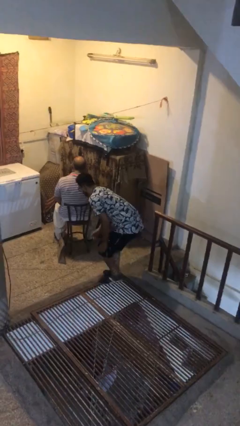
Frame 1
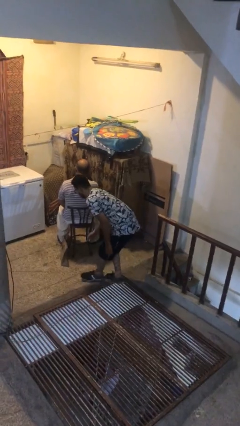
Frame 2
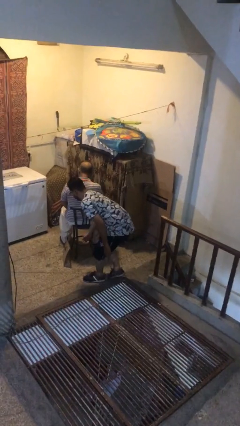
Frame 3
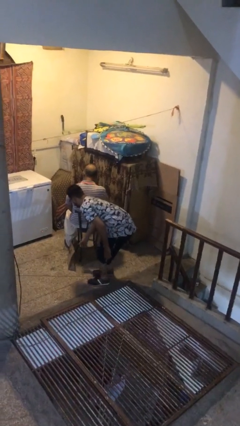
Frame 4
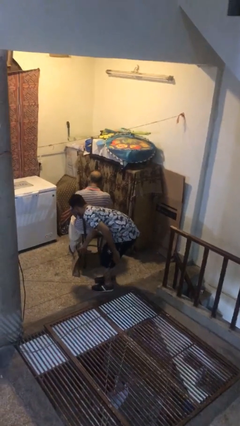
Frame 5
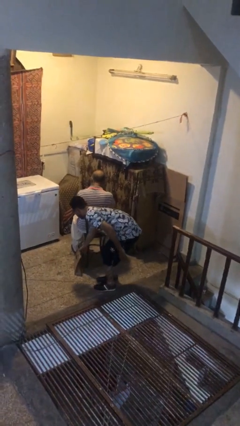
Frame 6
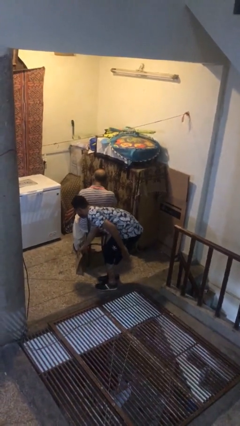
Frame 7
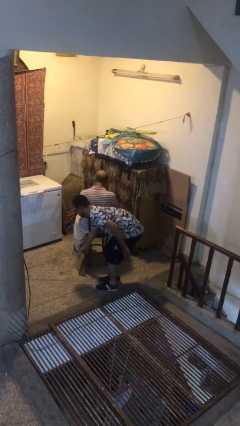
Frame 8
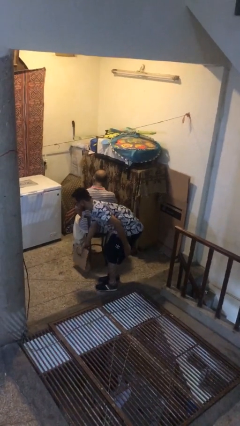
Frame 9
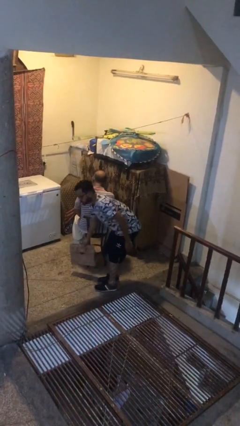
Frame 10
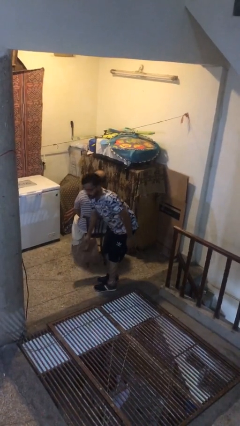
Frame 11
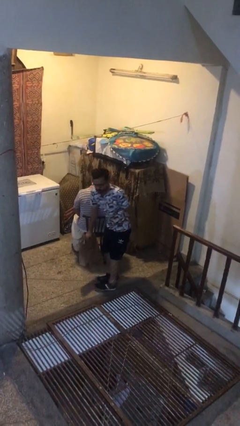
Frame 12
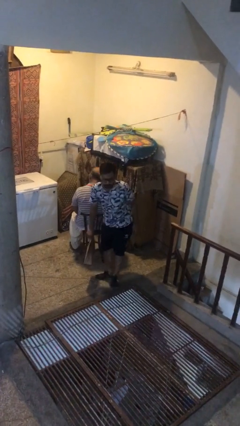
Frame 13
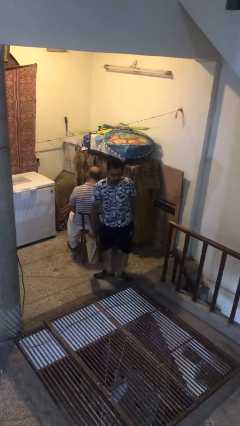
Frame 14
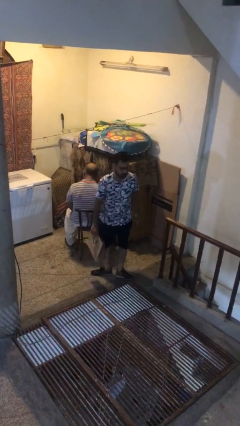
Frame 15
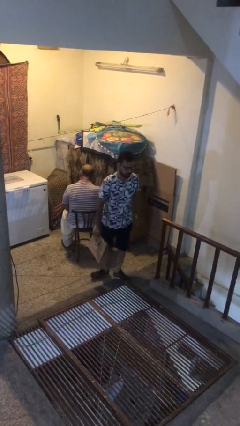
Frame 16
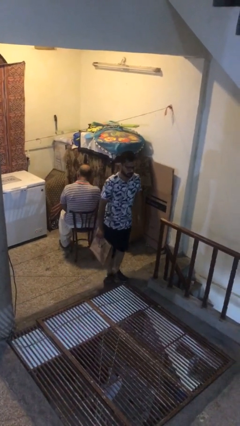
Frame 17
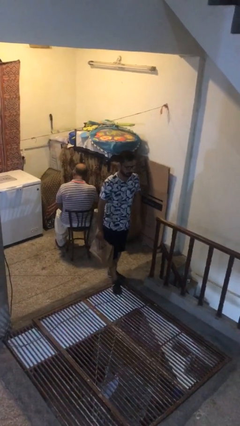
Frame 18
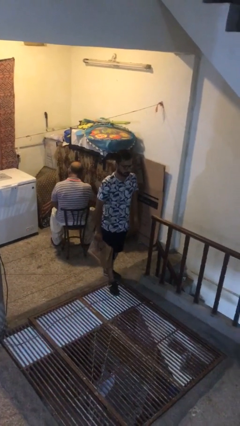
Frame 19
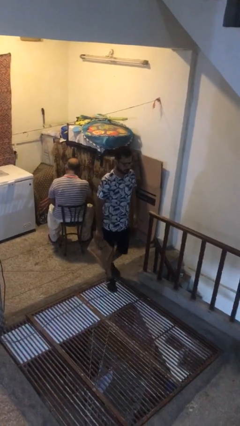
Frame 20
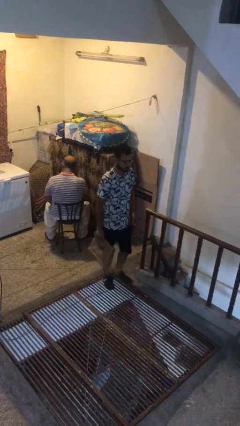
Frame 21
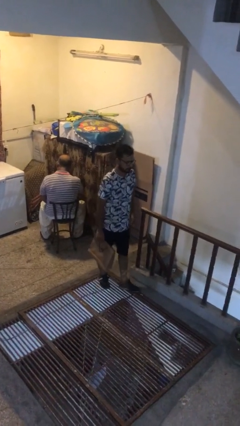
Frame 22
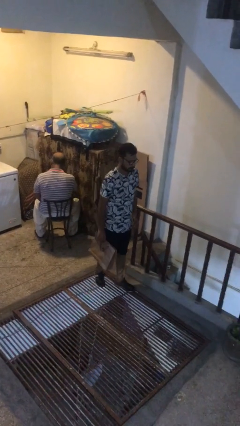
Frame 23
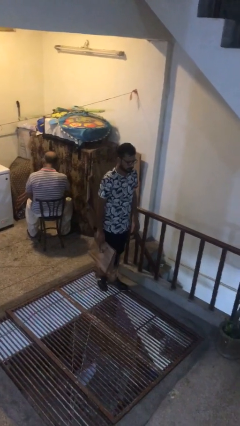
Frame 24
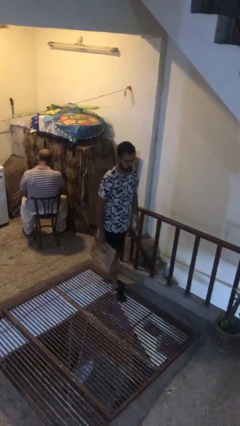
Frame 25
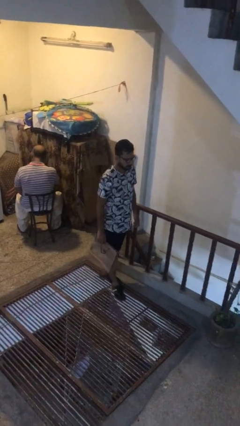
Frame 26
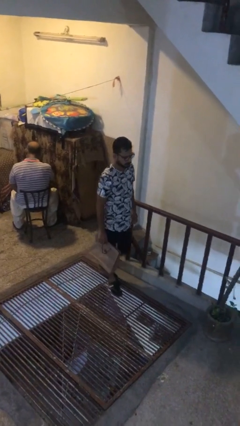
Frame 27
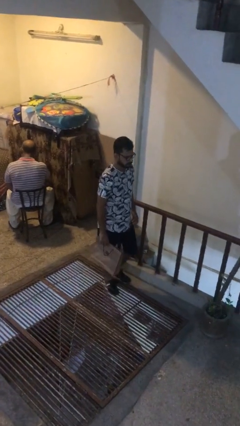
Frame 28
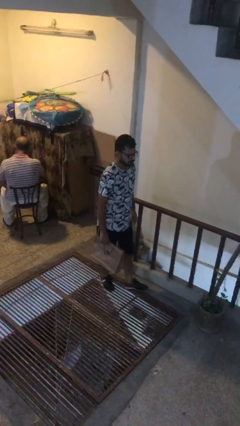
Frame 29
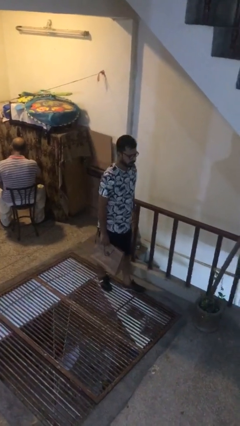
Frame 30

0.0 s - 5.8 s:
person steals object from person

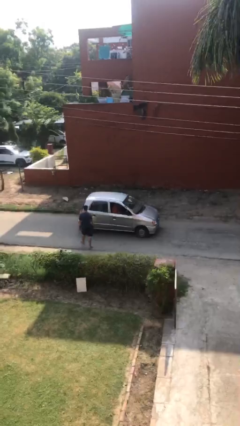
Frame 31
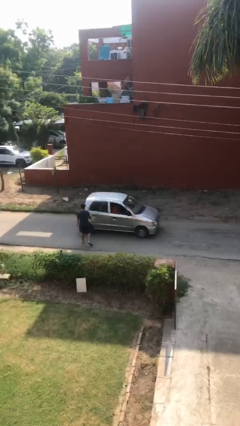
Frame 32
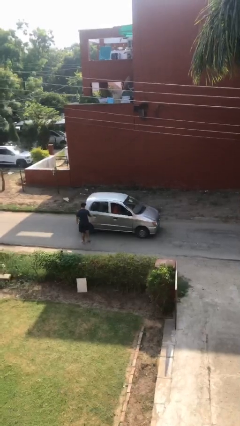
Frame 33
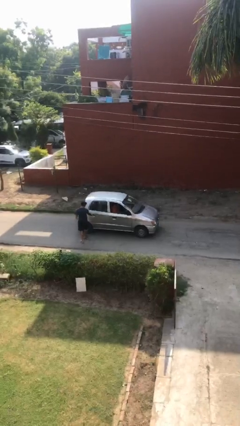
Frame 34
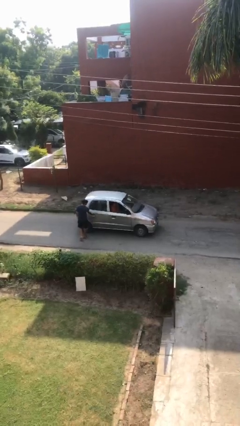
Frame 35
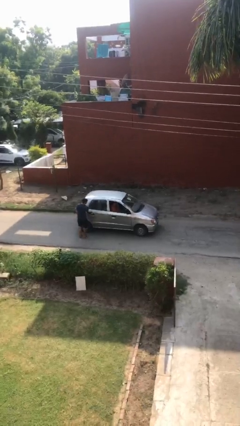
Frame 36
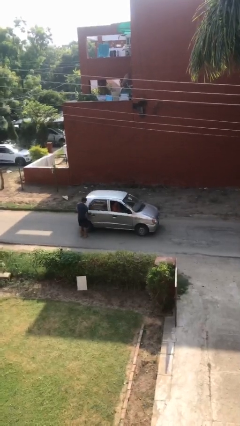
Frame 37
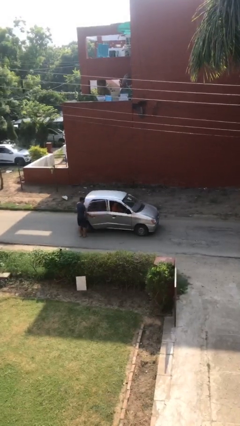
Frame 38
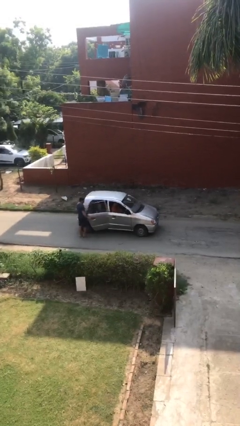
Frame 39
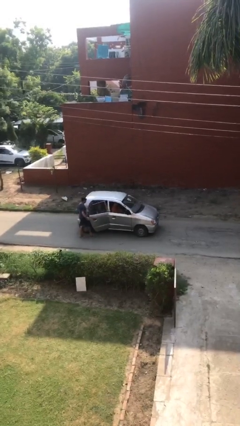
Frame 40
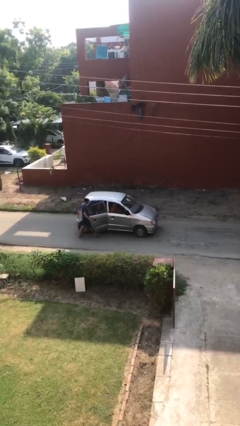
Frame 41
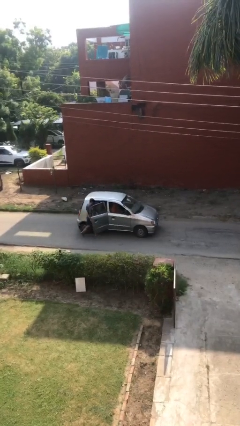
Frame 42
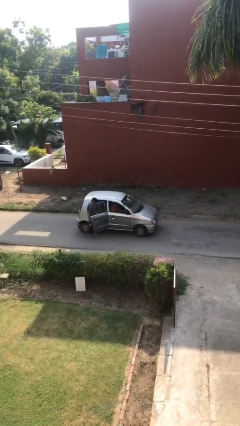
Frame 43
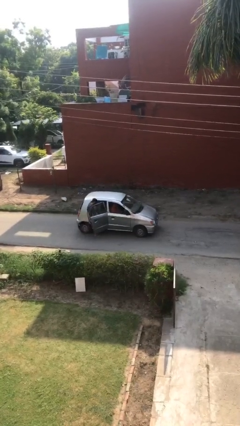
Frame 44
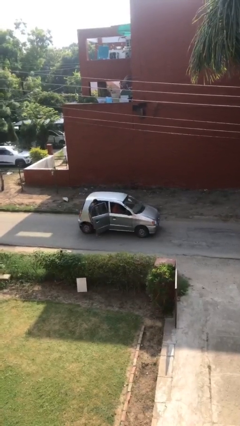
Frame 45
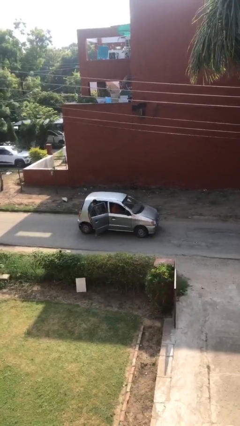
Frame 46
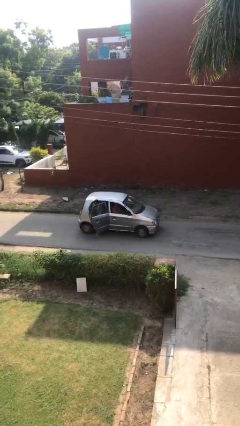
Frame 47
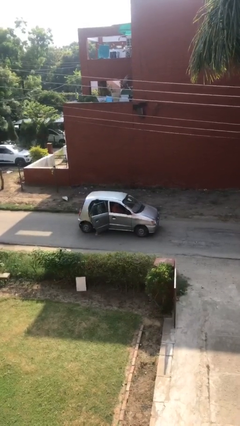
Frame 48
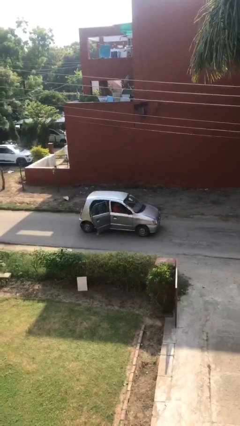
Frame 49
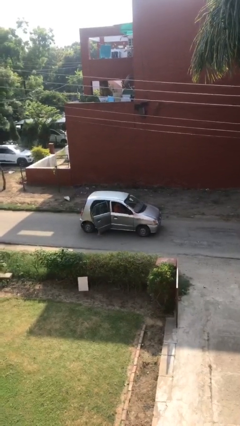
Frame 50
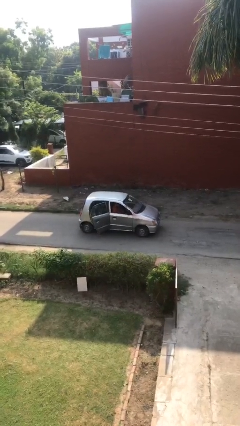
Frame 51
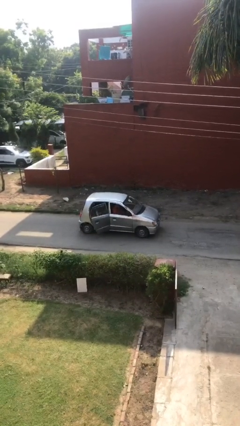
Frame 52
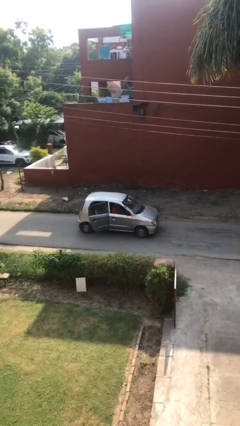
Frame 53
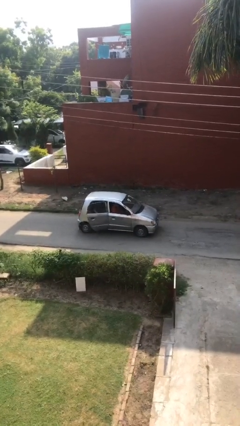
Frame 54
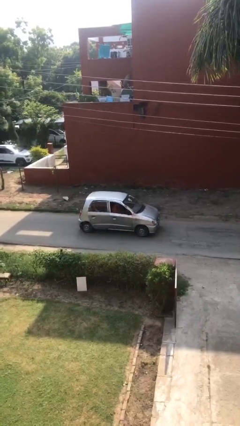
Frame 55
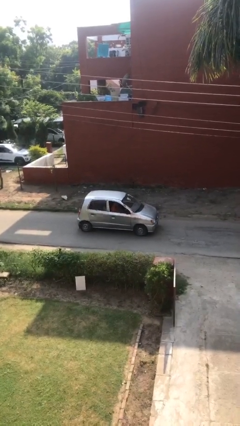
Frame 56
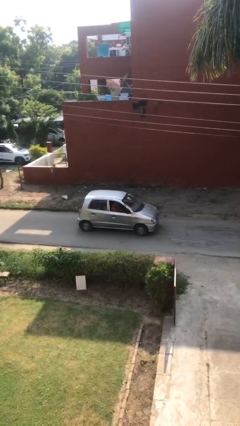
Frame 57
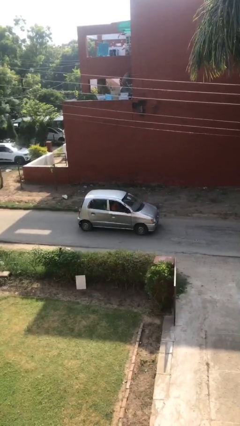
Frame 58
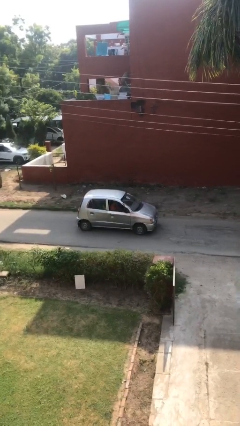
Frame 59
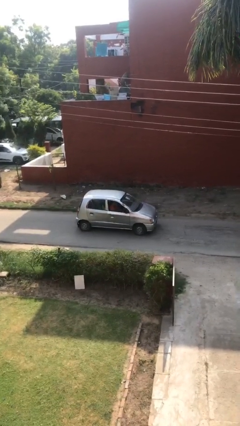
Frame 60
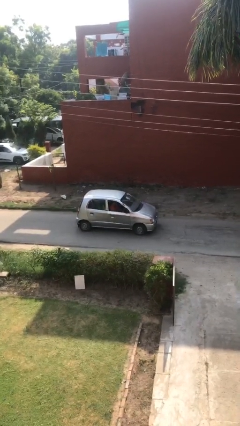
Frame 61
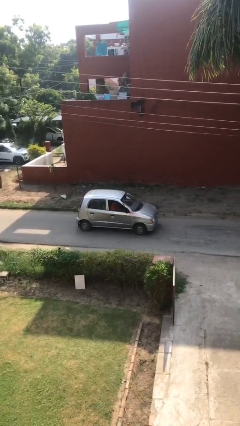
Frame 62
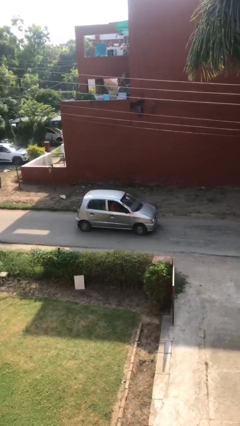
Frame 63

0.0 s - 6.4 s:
car picks up person

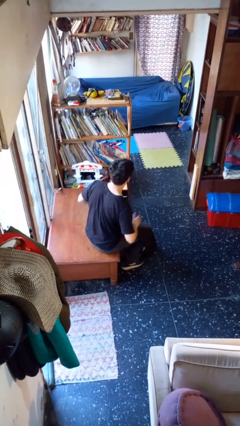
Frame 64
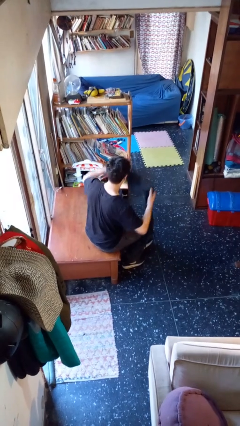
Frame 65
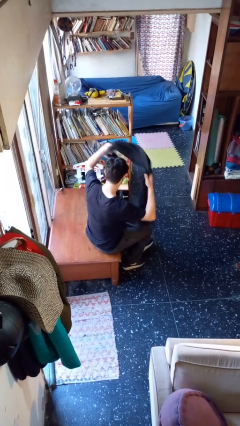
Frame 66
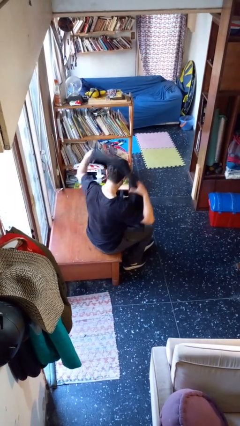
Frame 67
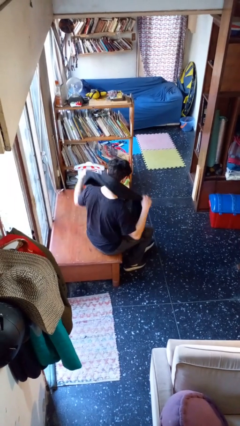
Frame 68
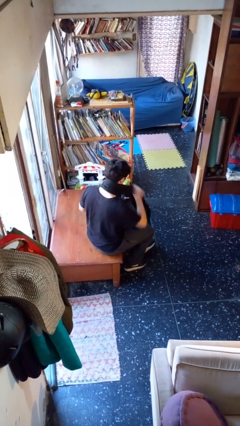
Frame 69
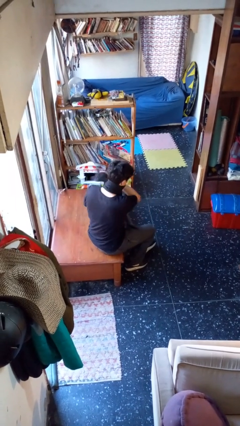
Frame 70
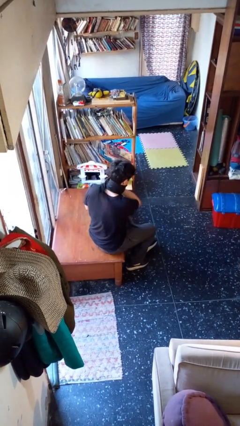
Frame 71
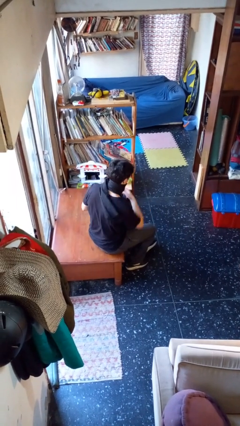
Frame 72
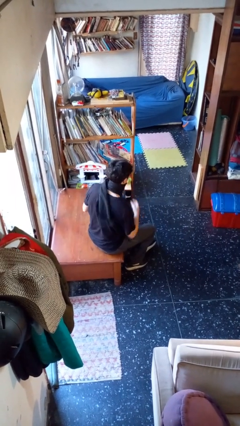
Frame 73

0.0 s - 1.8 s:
person puts on scarf

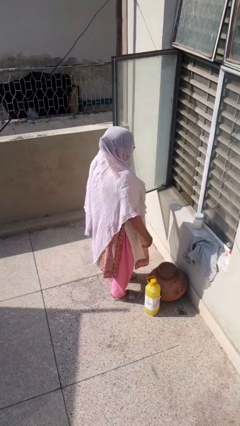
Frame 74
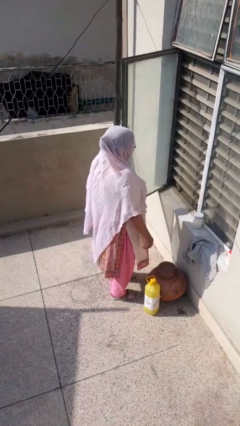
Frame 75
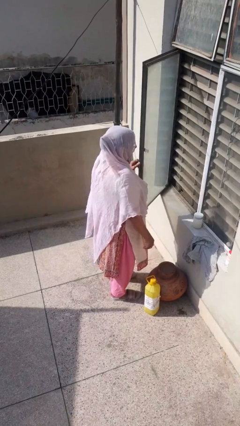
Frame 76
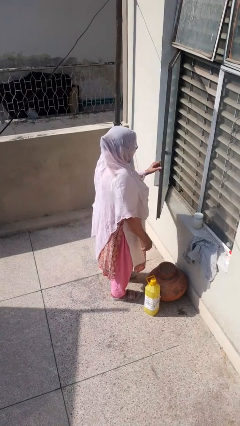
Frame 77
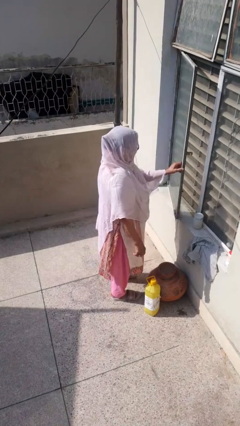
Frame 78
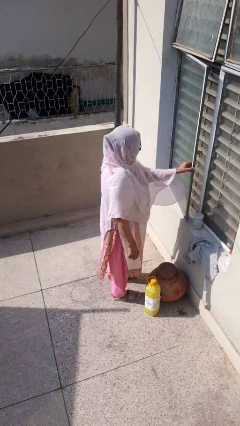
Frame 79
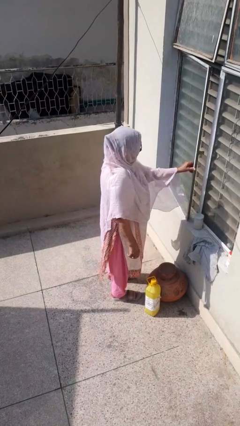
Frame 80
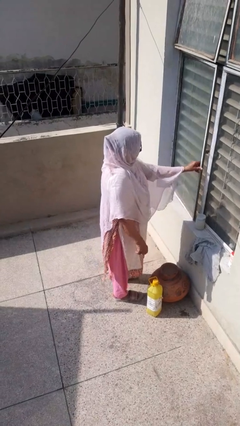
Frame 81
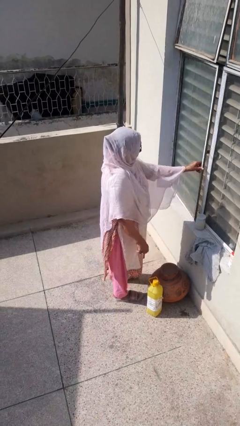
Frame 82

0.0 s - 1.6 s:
person closes home window

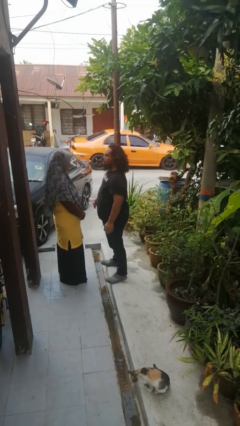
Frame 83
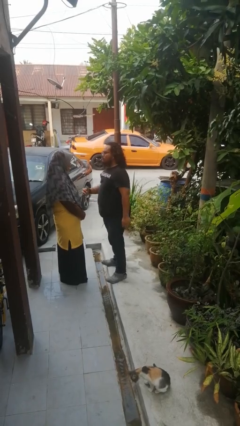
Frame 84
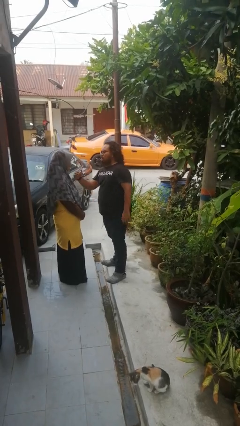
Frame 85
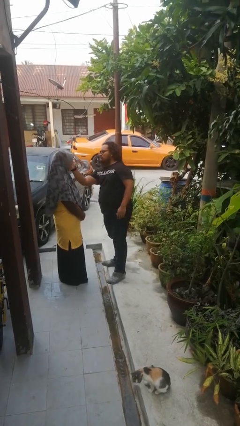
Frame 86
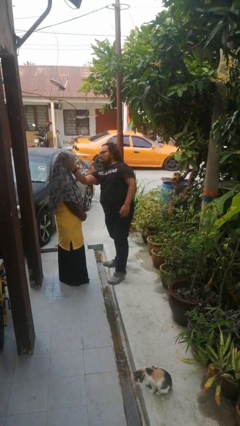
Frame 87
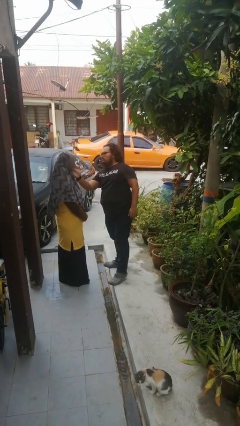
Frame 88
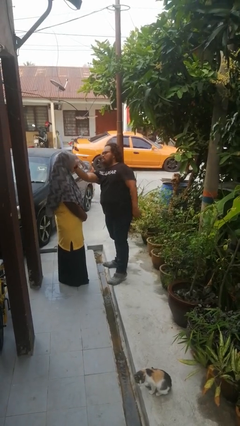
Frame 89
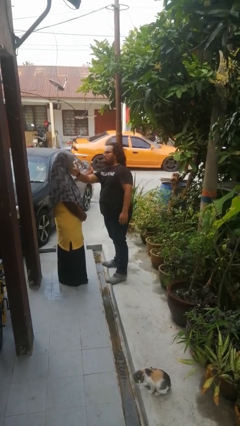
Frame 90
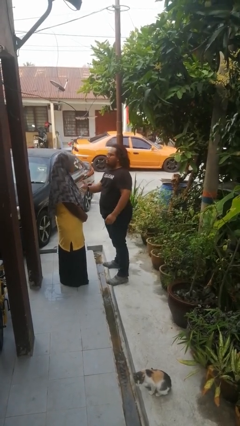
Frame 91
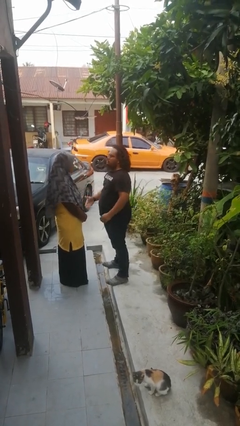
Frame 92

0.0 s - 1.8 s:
person touches face of person

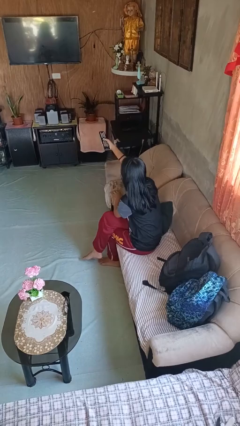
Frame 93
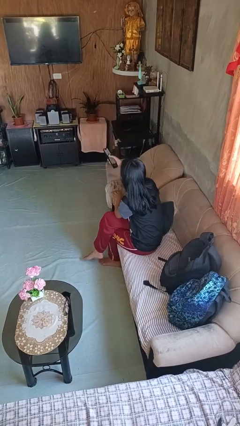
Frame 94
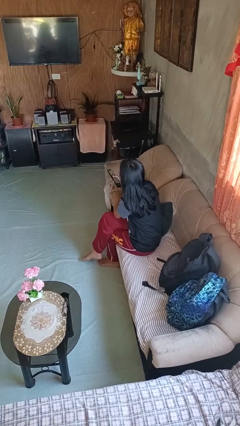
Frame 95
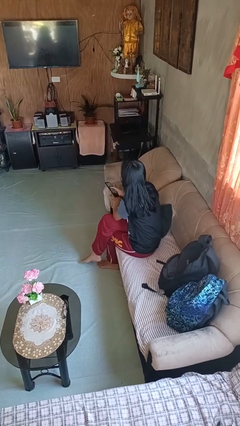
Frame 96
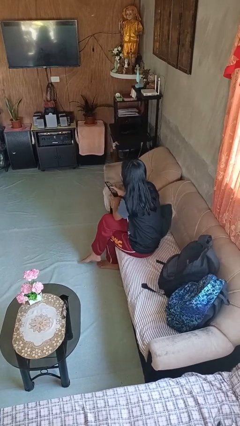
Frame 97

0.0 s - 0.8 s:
person uses television remote
